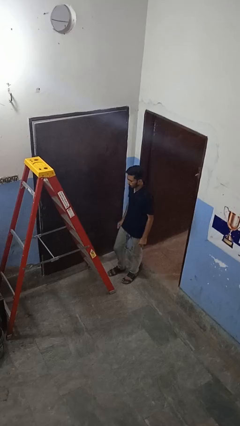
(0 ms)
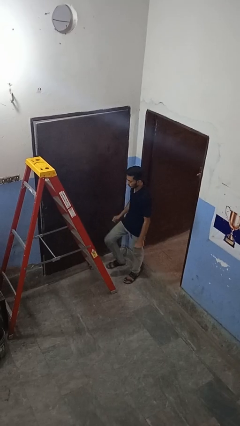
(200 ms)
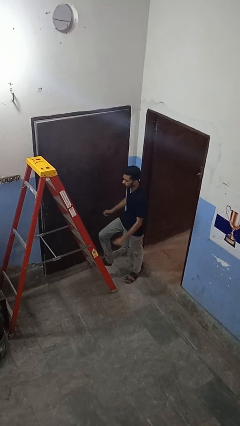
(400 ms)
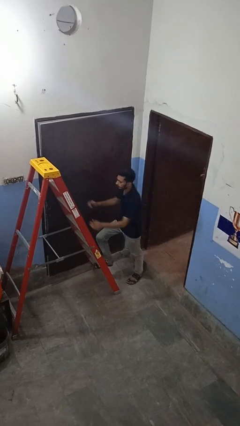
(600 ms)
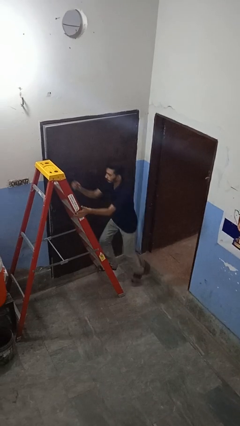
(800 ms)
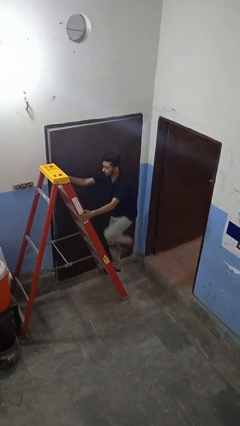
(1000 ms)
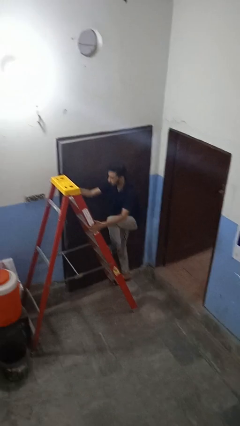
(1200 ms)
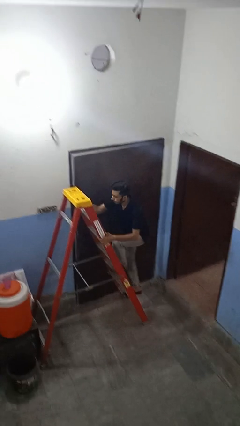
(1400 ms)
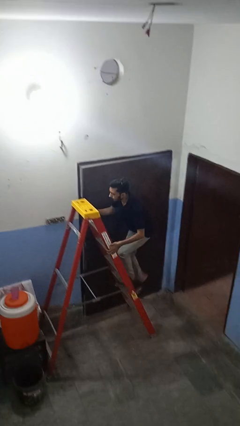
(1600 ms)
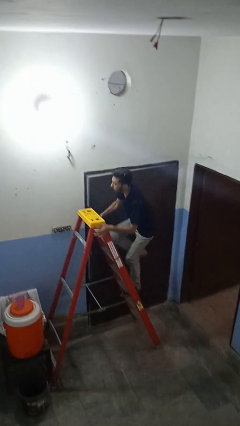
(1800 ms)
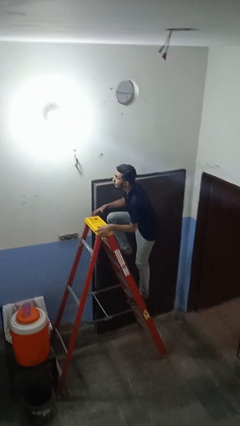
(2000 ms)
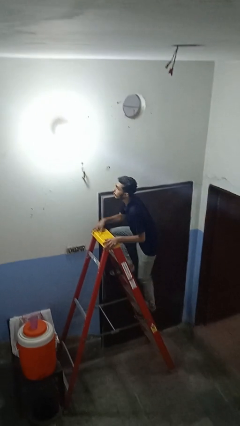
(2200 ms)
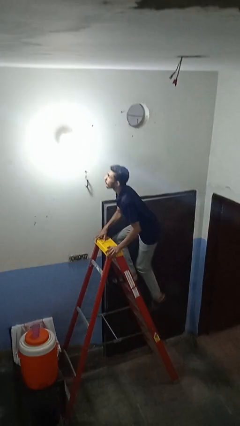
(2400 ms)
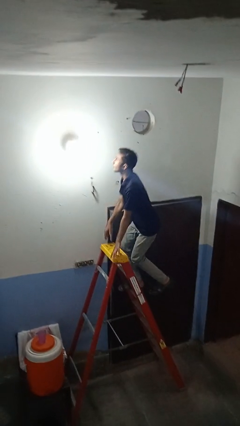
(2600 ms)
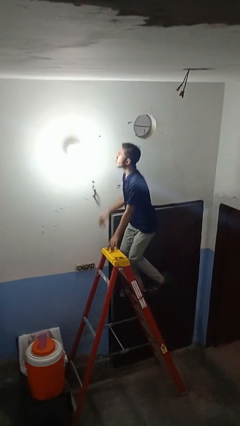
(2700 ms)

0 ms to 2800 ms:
person climbs up ladder

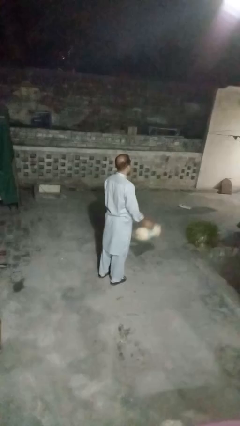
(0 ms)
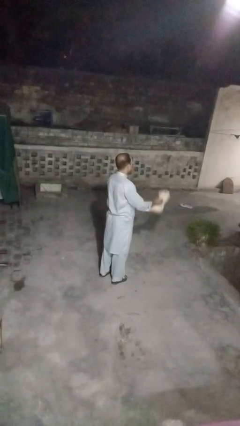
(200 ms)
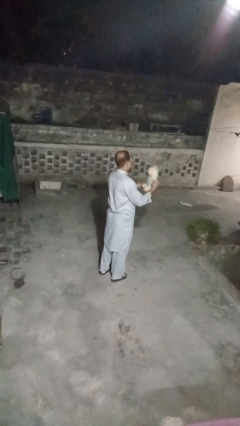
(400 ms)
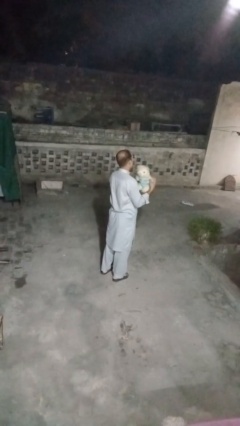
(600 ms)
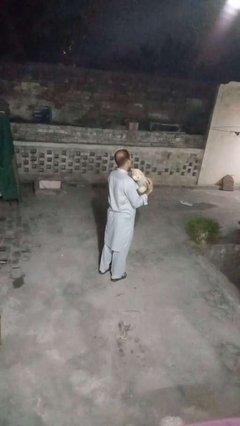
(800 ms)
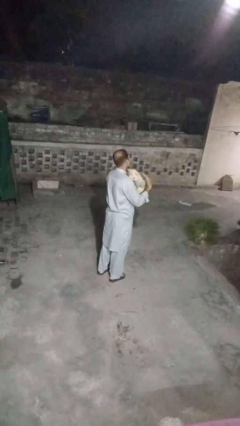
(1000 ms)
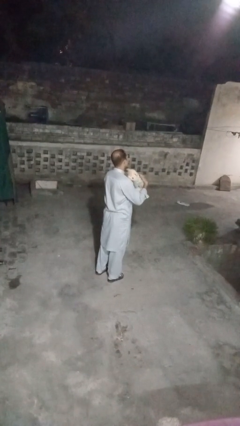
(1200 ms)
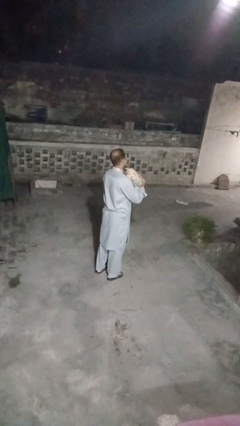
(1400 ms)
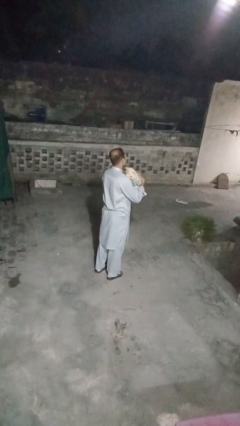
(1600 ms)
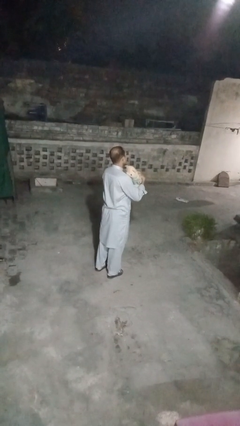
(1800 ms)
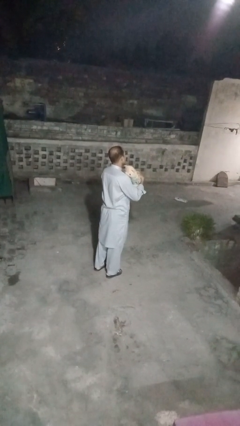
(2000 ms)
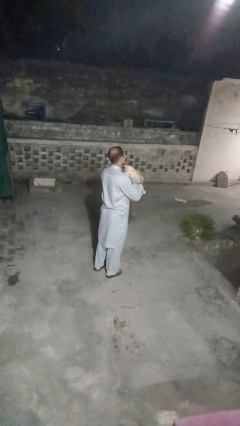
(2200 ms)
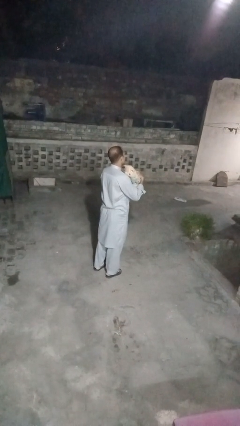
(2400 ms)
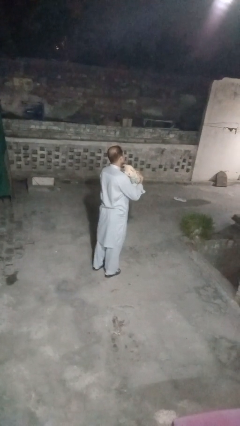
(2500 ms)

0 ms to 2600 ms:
person hugs stuffed animal

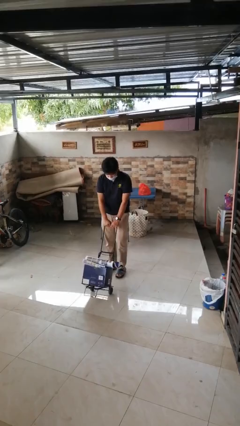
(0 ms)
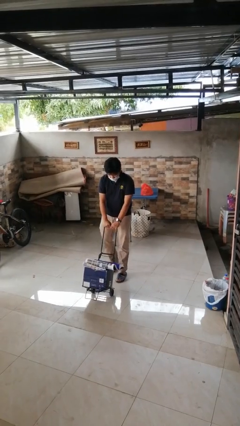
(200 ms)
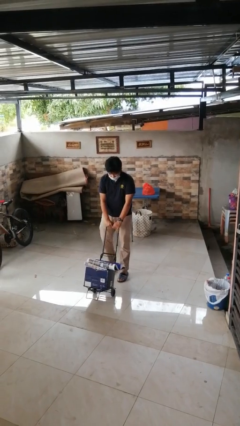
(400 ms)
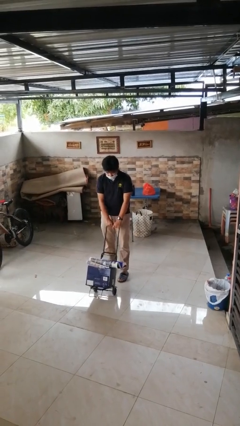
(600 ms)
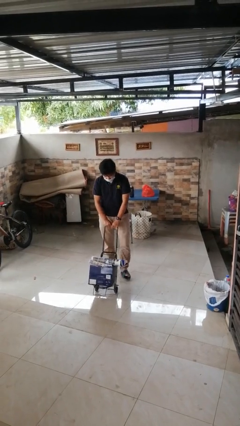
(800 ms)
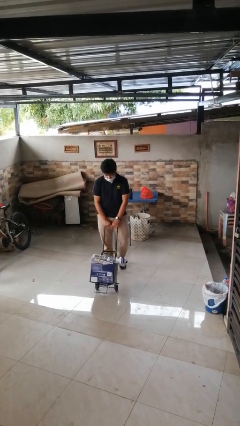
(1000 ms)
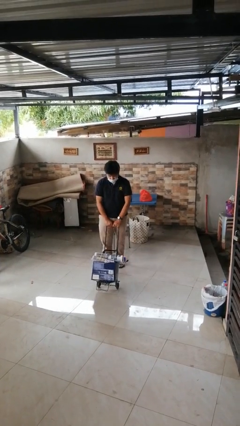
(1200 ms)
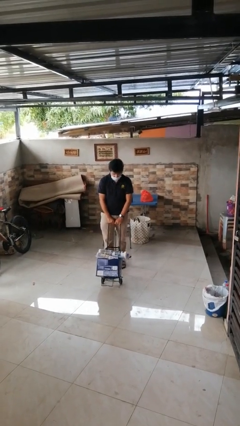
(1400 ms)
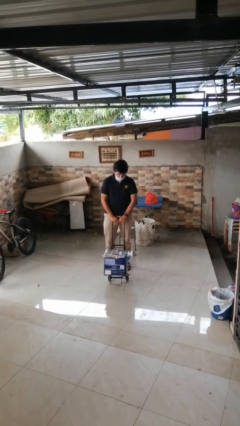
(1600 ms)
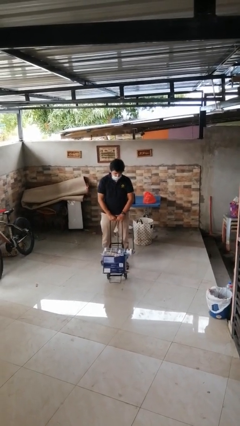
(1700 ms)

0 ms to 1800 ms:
person pulls wheeled cart

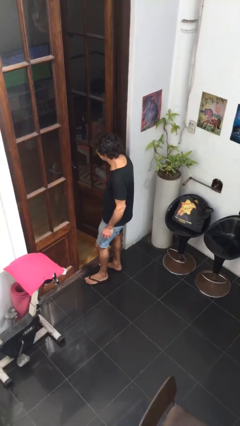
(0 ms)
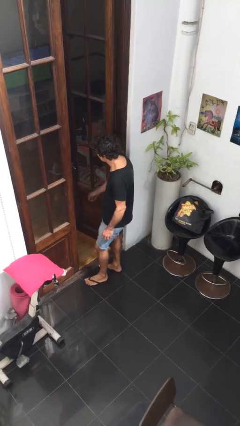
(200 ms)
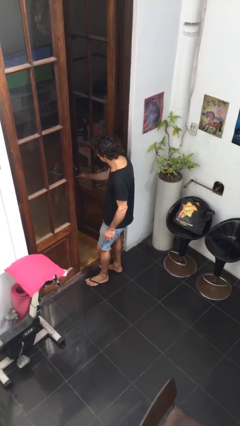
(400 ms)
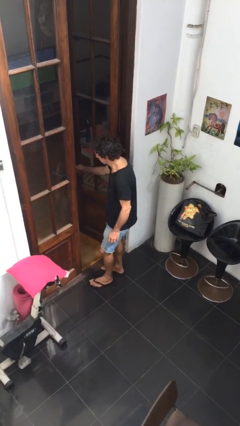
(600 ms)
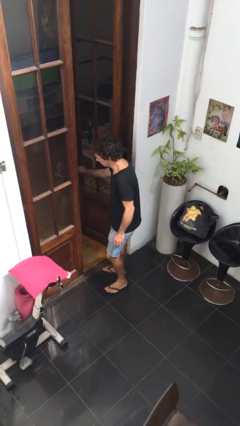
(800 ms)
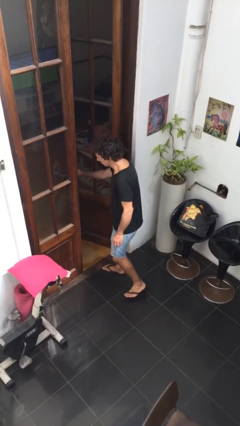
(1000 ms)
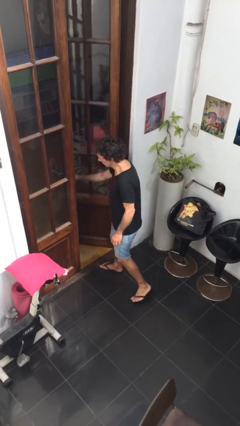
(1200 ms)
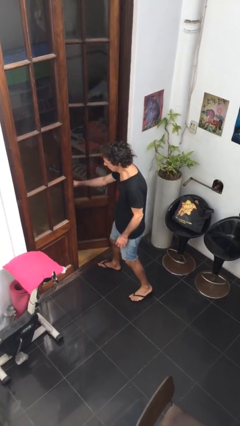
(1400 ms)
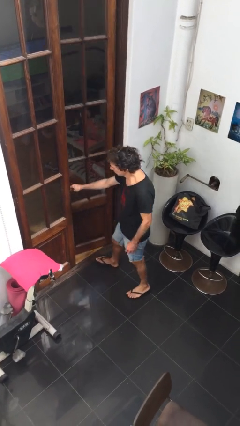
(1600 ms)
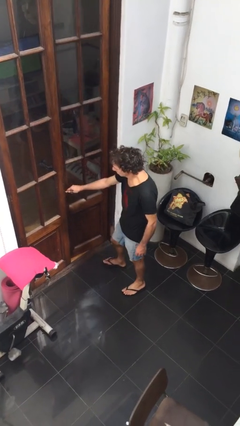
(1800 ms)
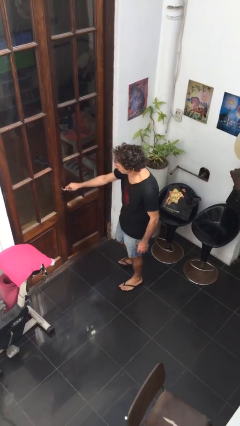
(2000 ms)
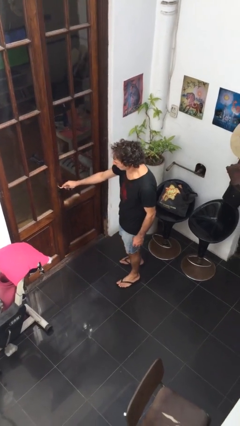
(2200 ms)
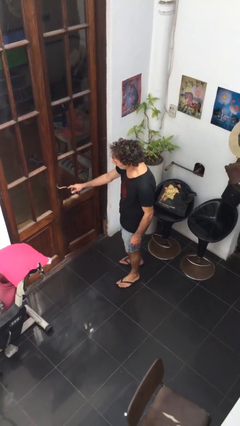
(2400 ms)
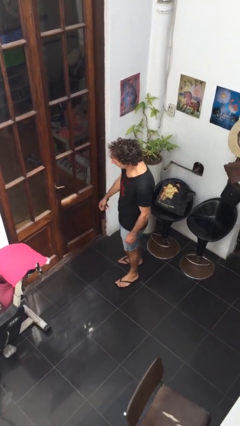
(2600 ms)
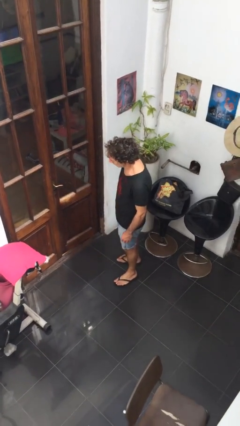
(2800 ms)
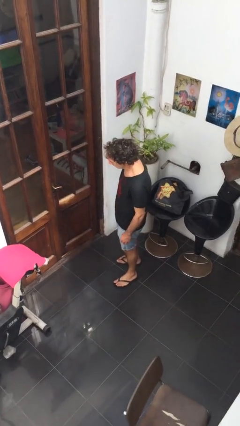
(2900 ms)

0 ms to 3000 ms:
person closes facility door

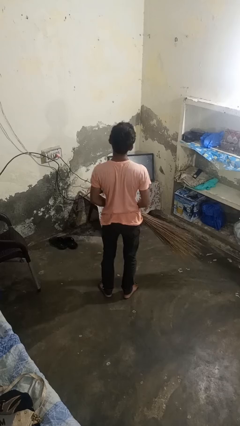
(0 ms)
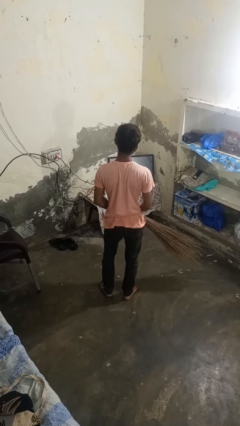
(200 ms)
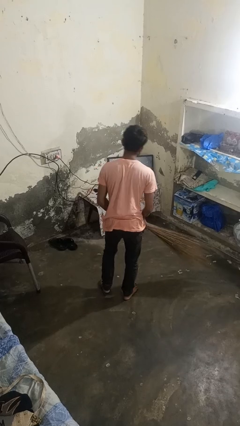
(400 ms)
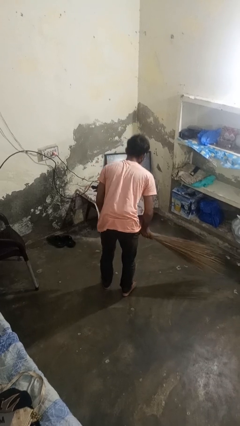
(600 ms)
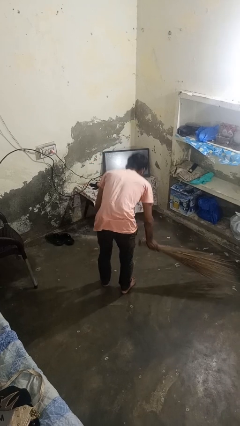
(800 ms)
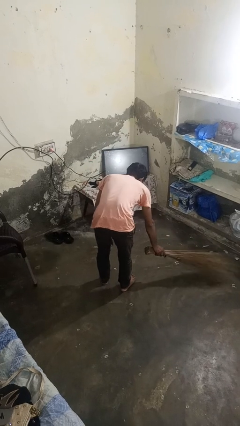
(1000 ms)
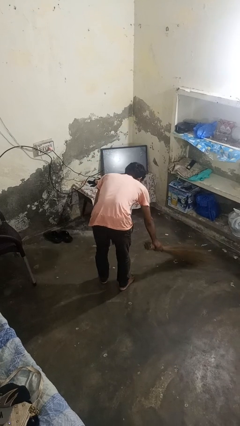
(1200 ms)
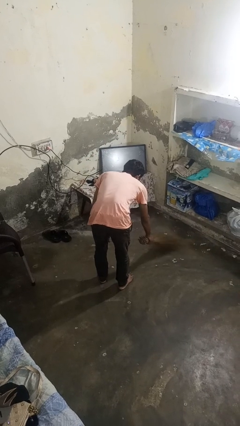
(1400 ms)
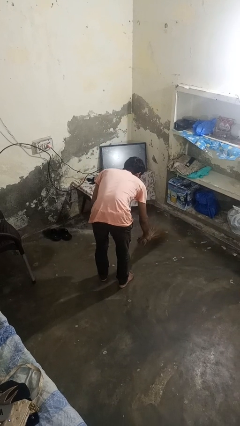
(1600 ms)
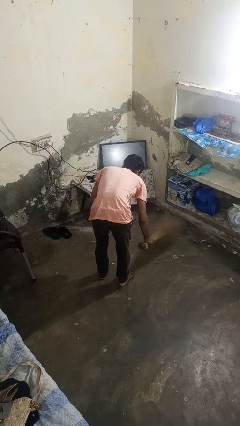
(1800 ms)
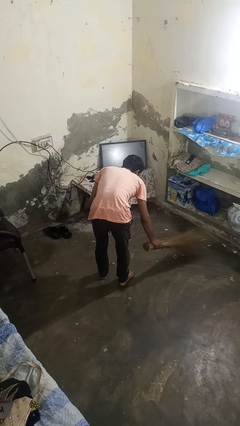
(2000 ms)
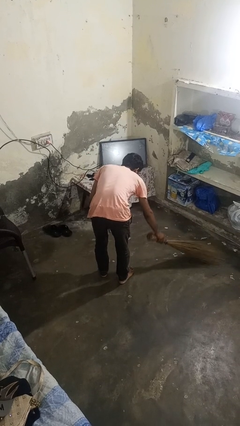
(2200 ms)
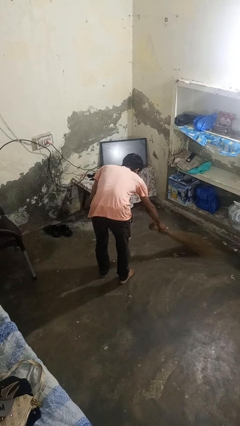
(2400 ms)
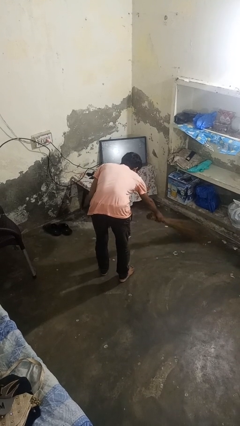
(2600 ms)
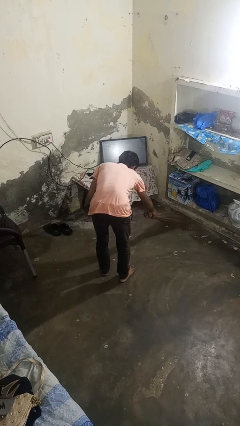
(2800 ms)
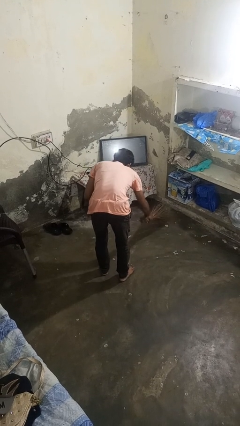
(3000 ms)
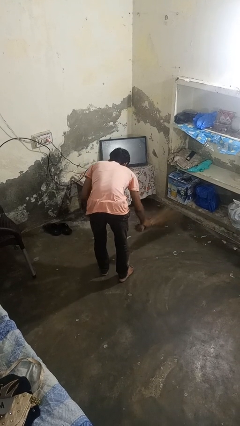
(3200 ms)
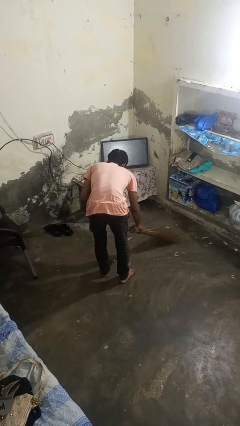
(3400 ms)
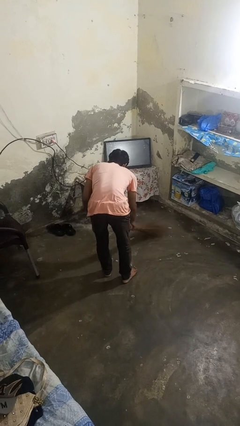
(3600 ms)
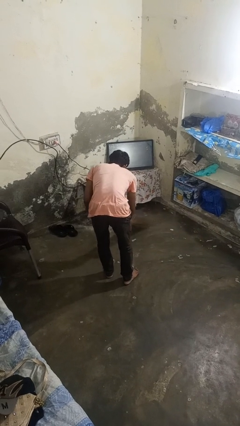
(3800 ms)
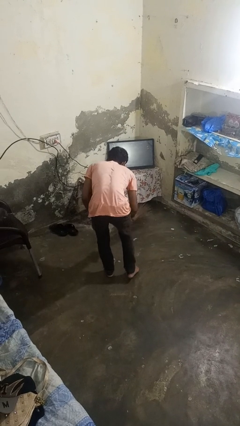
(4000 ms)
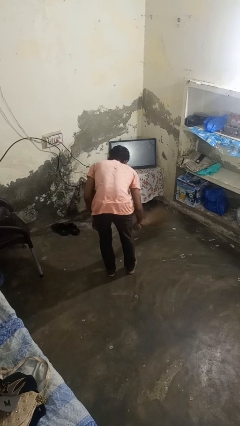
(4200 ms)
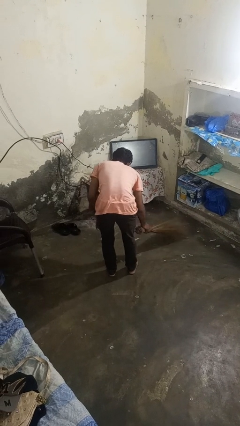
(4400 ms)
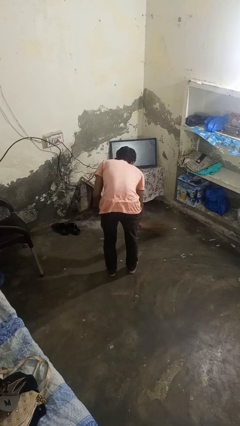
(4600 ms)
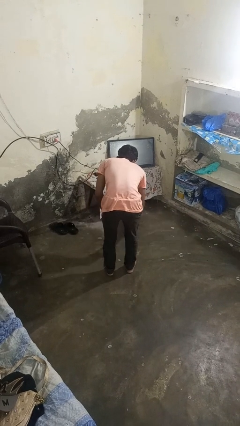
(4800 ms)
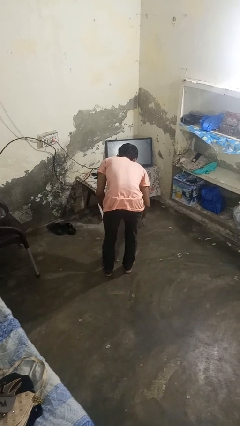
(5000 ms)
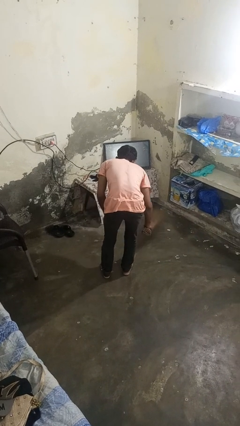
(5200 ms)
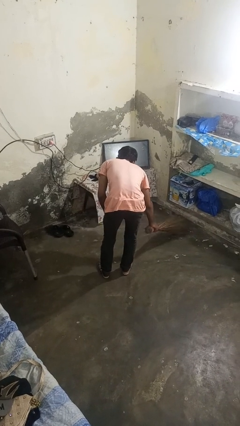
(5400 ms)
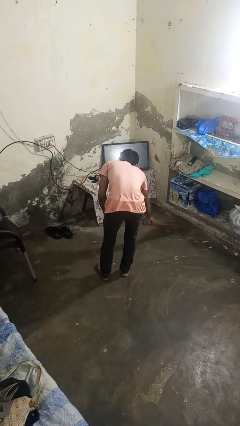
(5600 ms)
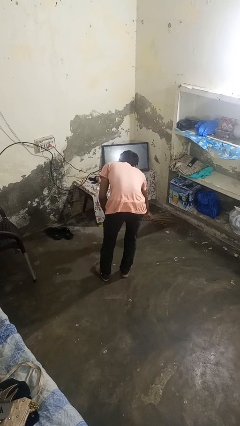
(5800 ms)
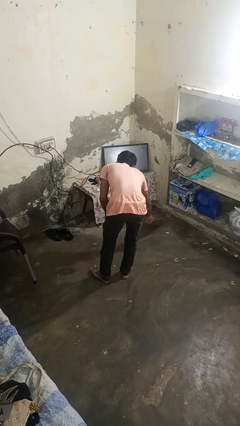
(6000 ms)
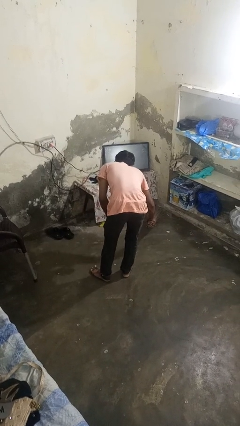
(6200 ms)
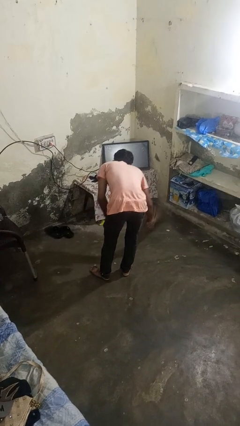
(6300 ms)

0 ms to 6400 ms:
person sweeps floor

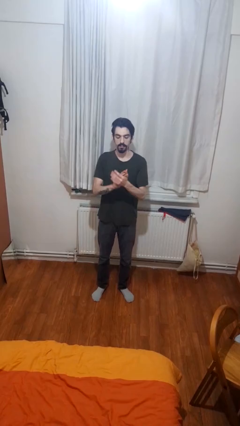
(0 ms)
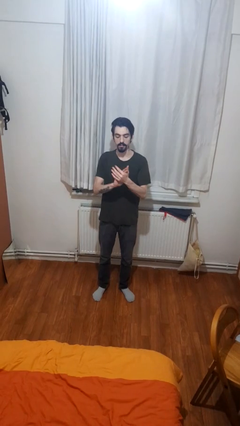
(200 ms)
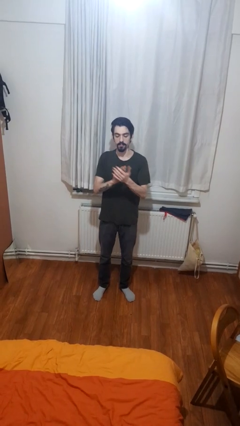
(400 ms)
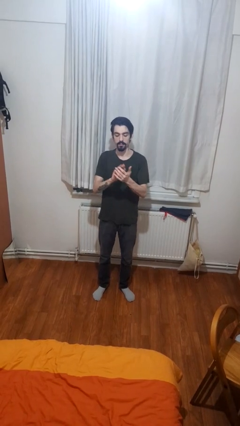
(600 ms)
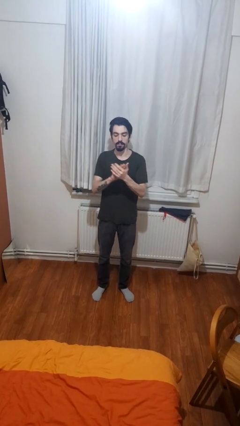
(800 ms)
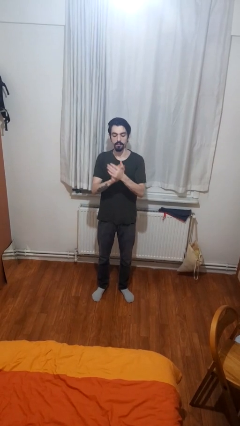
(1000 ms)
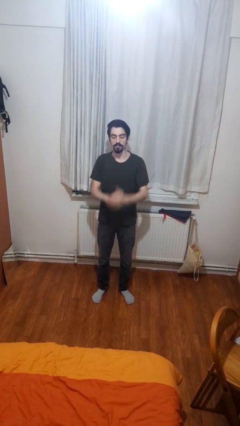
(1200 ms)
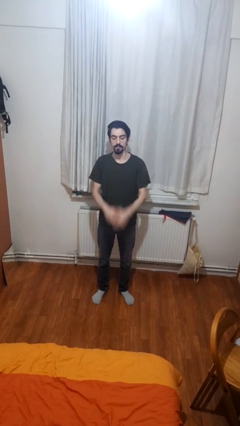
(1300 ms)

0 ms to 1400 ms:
person claps hands
